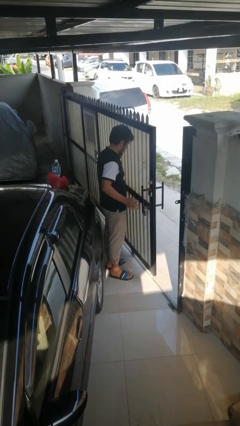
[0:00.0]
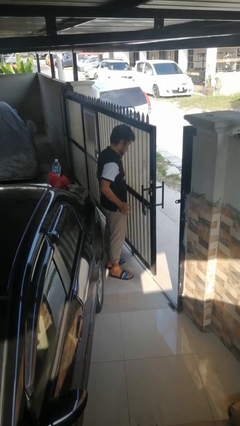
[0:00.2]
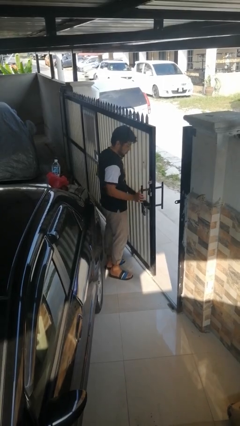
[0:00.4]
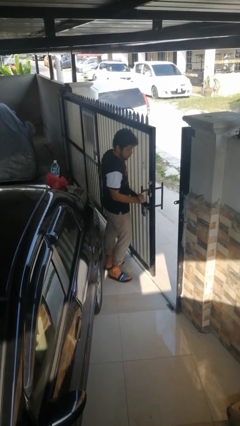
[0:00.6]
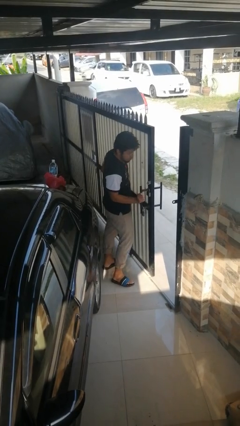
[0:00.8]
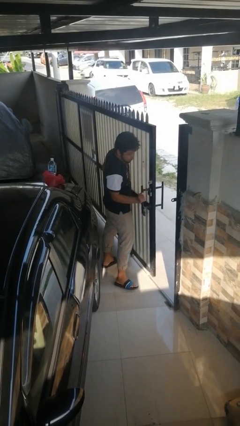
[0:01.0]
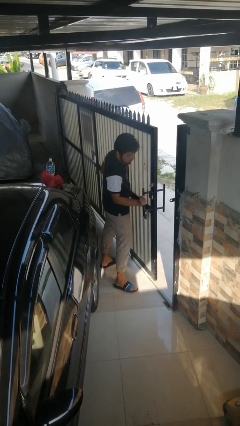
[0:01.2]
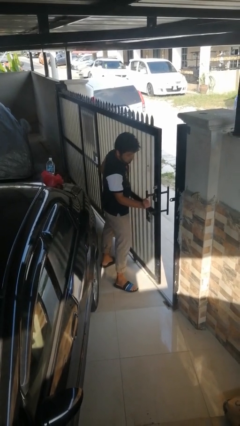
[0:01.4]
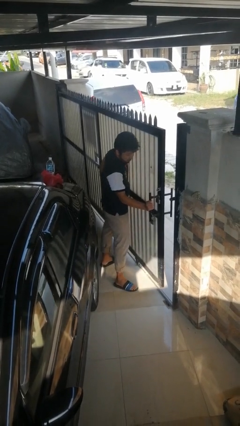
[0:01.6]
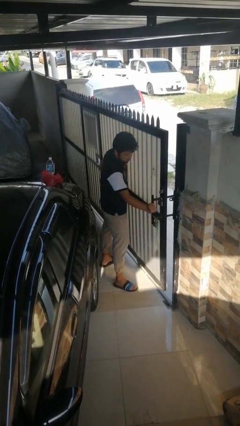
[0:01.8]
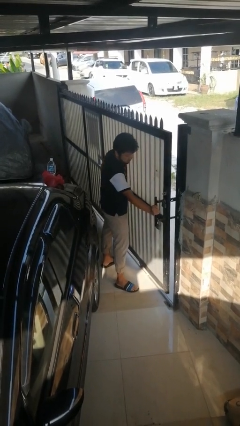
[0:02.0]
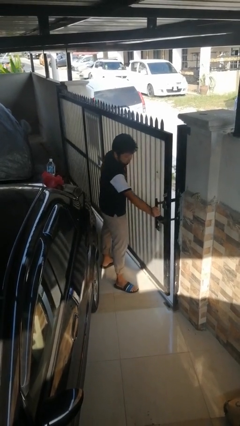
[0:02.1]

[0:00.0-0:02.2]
person closes sliding door

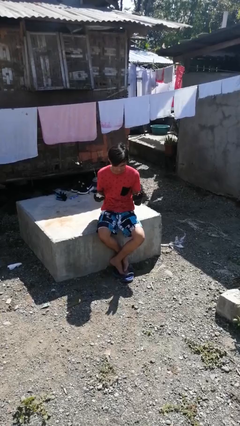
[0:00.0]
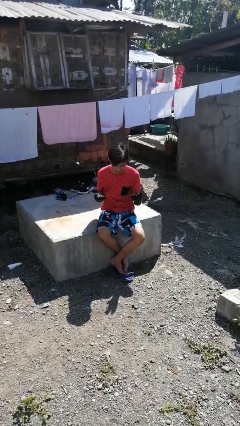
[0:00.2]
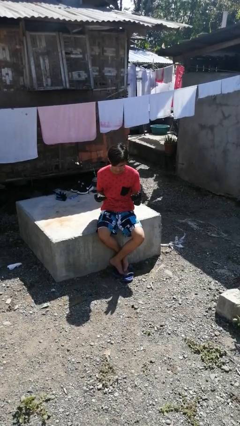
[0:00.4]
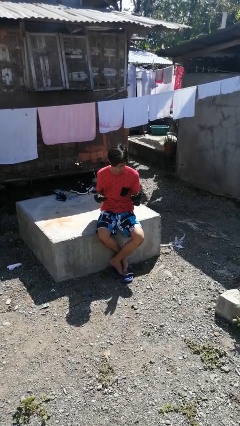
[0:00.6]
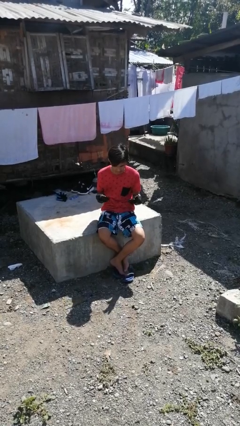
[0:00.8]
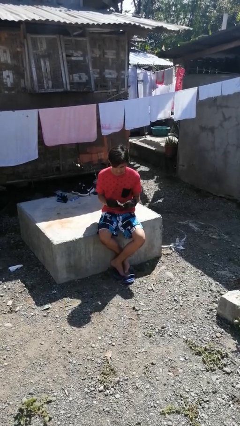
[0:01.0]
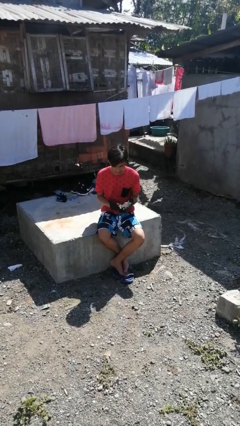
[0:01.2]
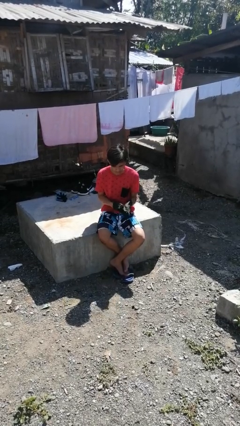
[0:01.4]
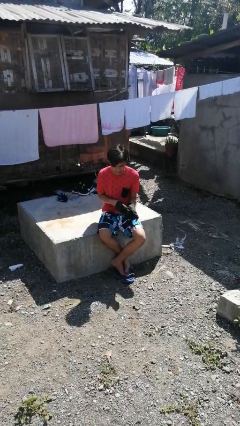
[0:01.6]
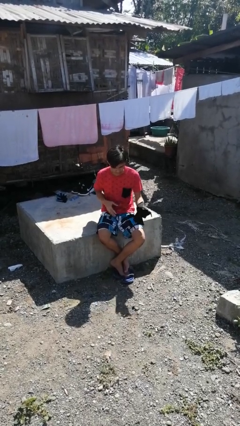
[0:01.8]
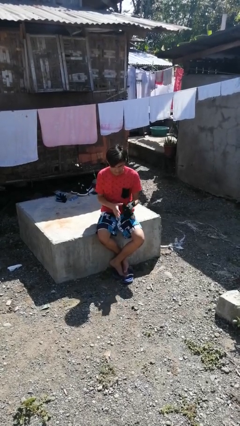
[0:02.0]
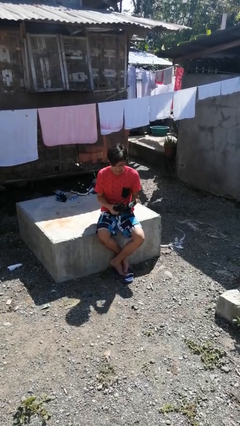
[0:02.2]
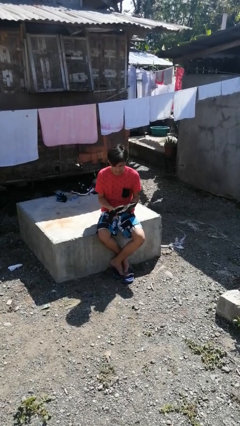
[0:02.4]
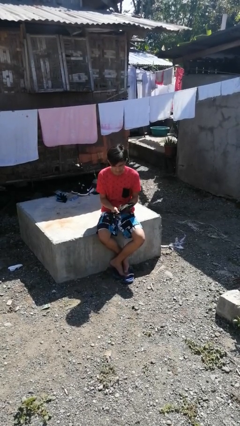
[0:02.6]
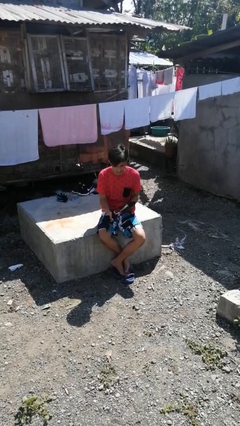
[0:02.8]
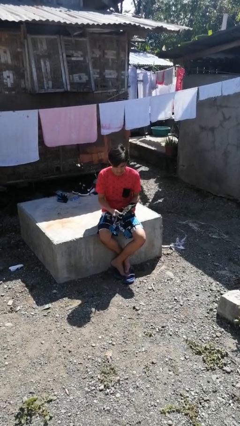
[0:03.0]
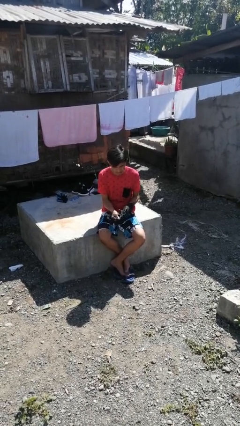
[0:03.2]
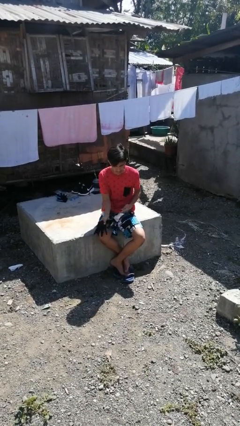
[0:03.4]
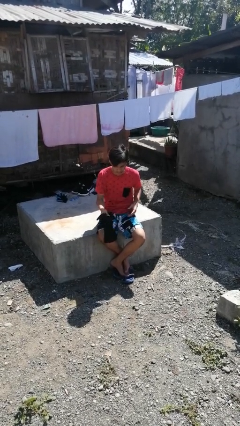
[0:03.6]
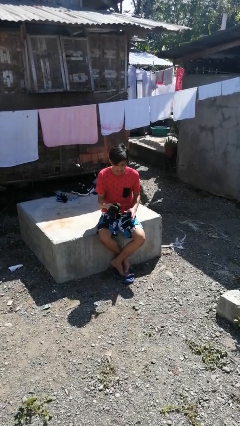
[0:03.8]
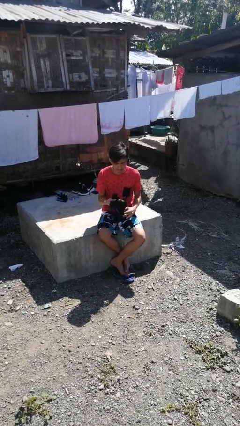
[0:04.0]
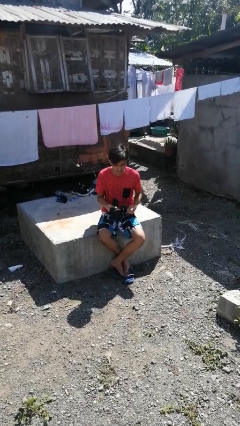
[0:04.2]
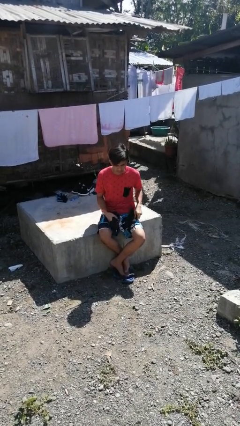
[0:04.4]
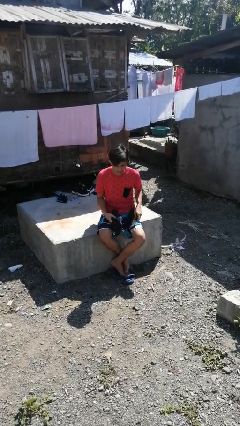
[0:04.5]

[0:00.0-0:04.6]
person takes off gloves

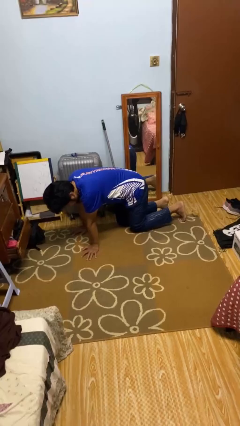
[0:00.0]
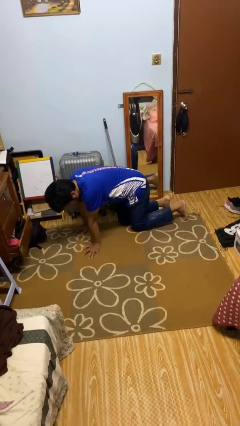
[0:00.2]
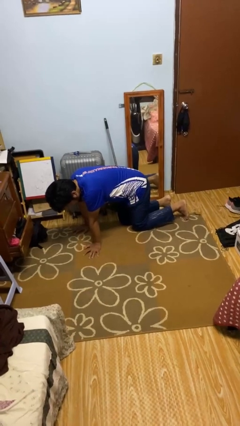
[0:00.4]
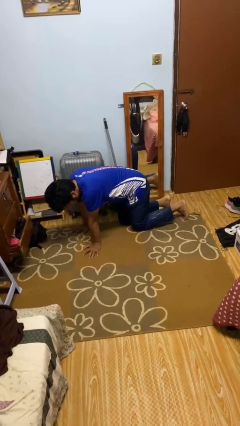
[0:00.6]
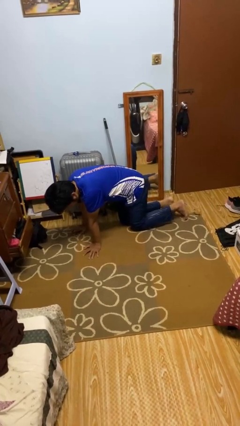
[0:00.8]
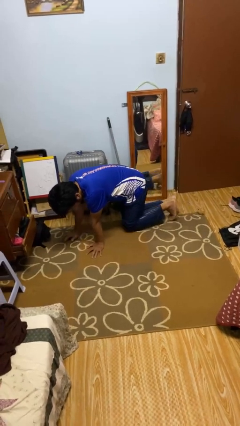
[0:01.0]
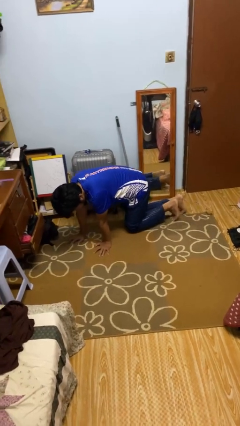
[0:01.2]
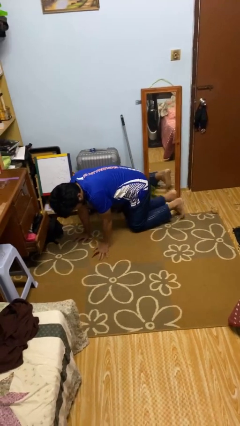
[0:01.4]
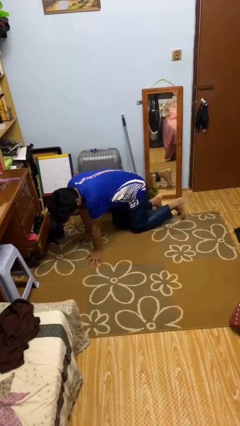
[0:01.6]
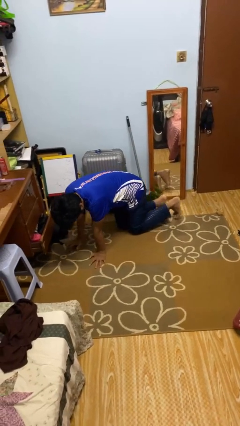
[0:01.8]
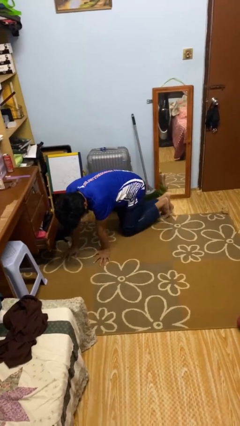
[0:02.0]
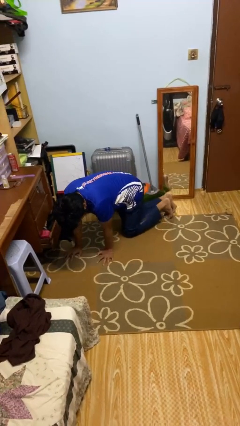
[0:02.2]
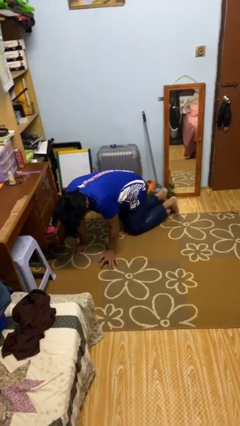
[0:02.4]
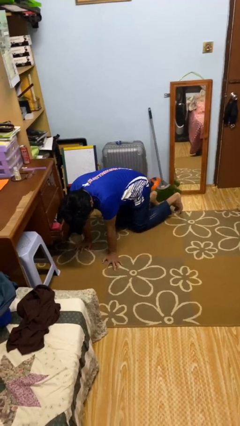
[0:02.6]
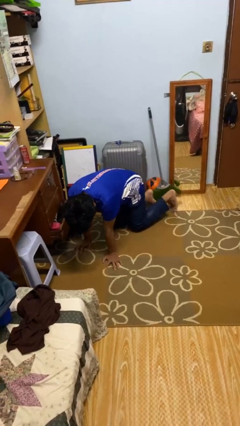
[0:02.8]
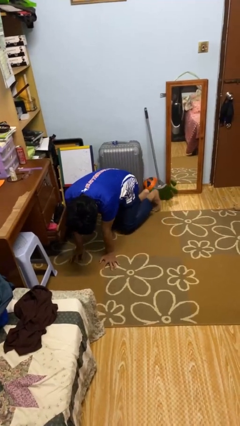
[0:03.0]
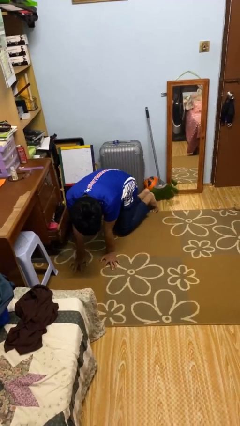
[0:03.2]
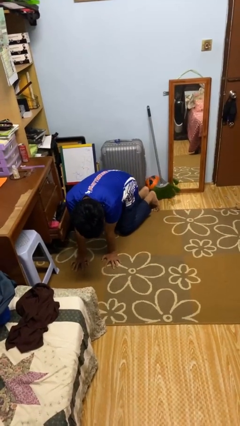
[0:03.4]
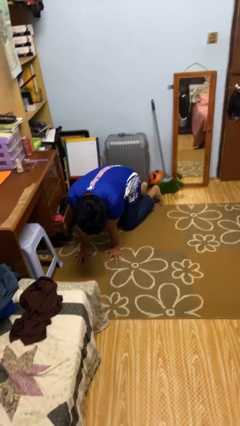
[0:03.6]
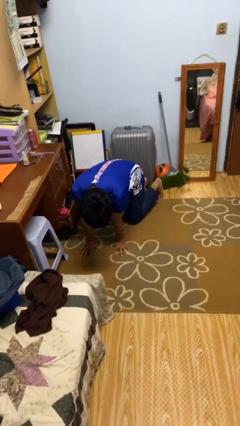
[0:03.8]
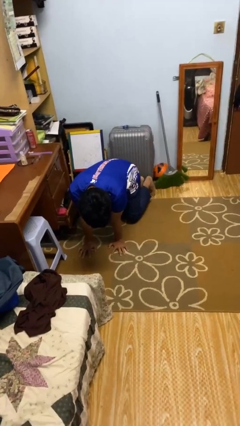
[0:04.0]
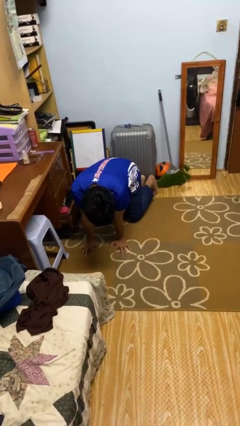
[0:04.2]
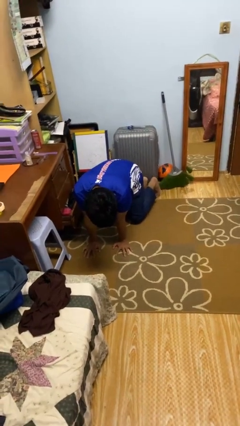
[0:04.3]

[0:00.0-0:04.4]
person crawls

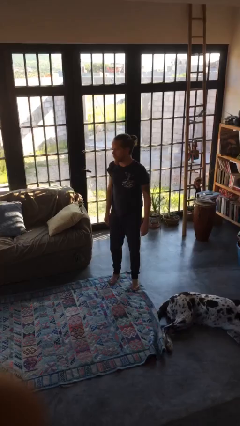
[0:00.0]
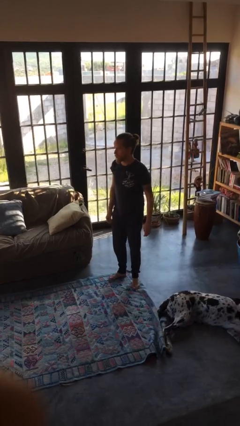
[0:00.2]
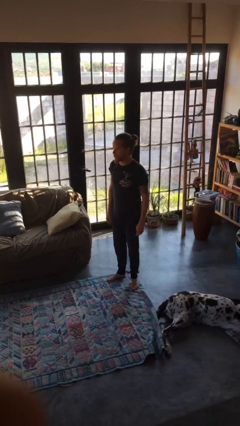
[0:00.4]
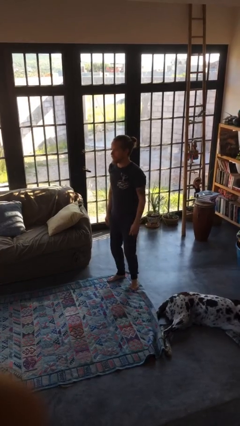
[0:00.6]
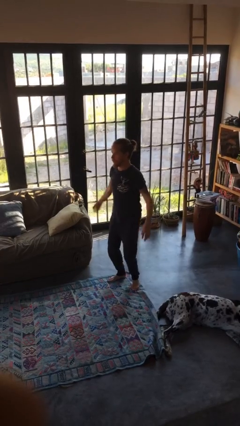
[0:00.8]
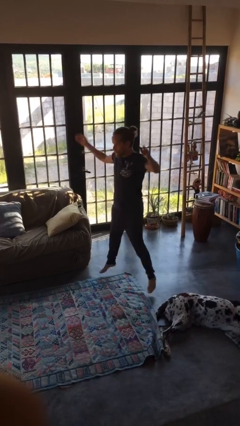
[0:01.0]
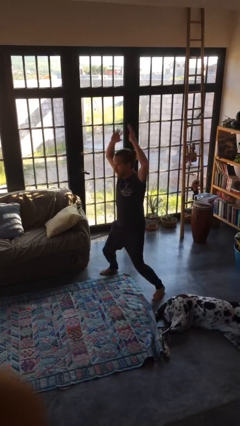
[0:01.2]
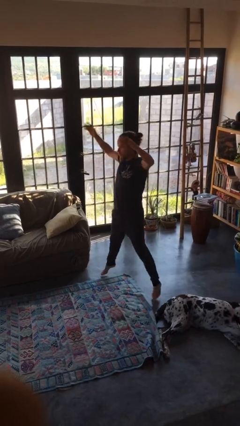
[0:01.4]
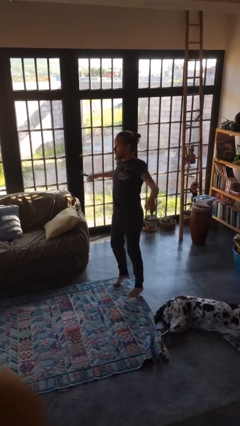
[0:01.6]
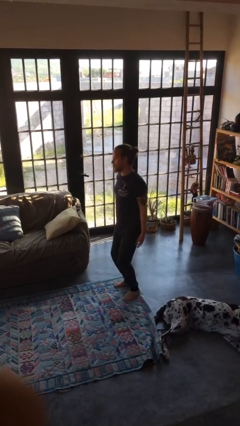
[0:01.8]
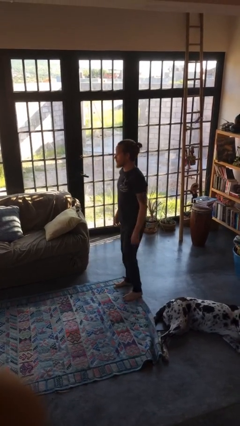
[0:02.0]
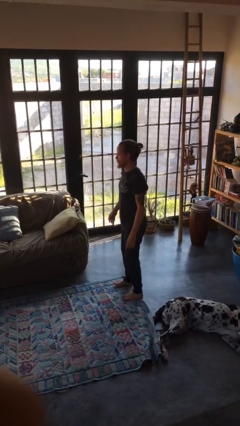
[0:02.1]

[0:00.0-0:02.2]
person exercises with jumping jacks

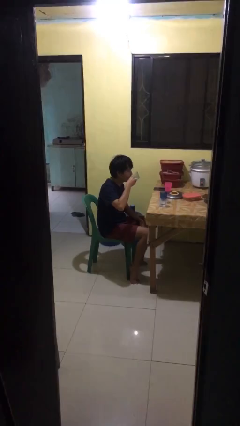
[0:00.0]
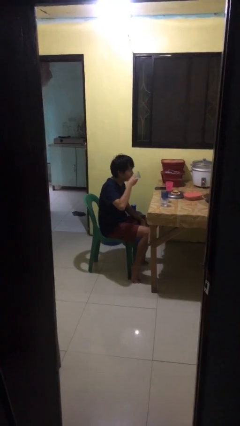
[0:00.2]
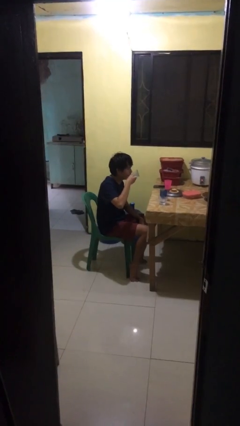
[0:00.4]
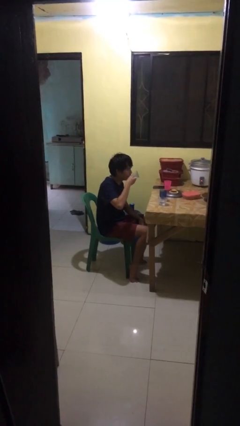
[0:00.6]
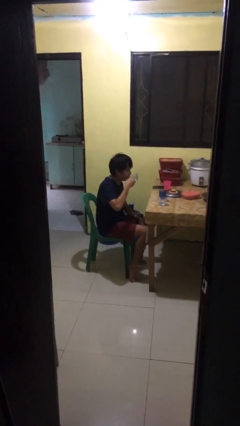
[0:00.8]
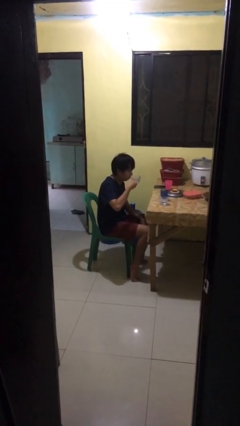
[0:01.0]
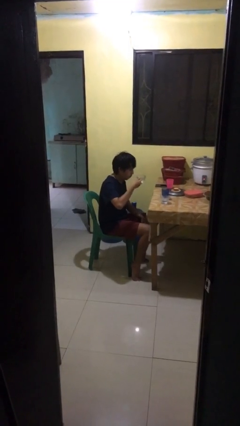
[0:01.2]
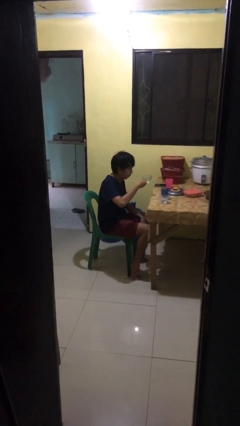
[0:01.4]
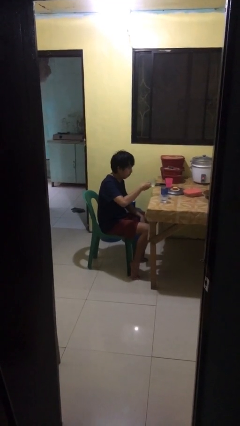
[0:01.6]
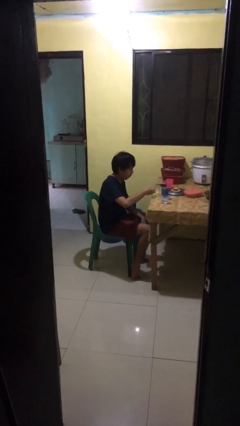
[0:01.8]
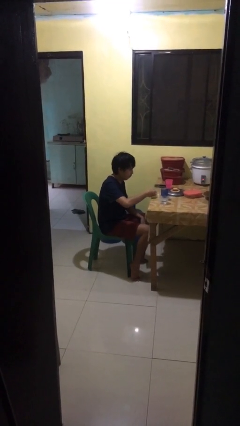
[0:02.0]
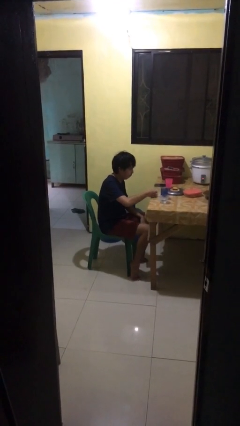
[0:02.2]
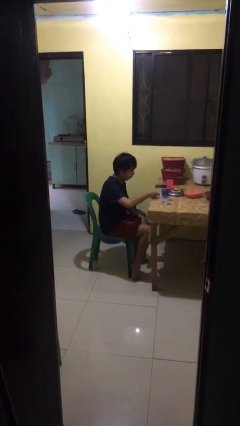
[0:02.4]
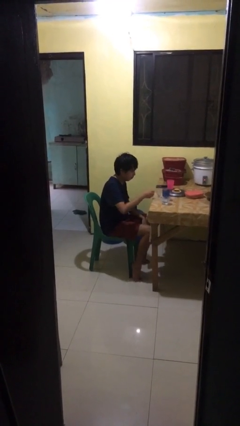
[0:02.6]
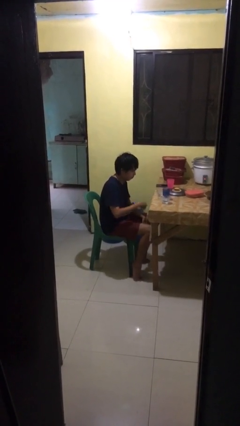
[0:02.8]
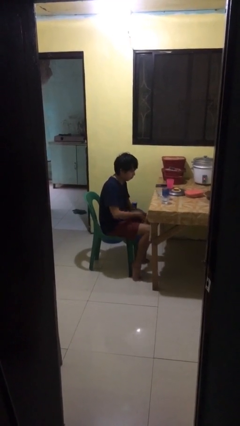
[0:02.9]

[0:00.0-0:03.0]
person puts down object on table

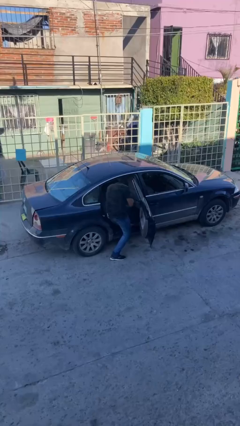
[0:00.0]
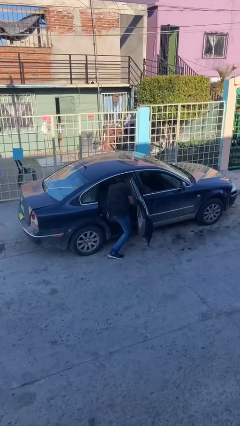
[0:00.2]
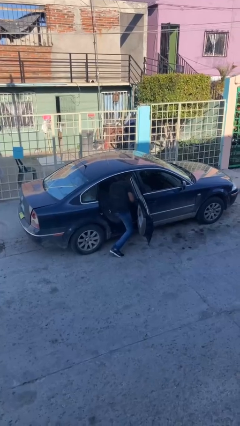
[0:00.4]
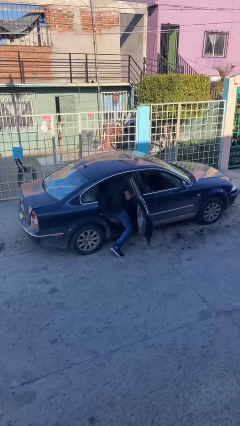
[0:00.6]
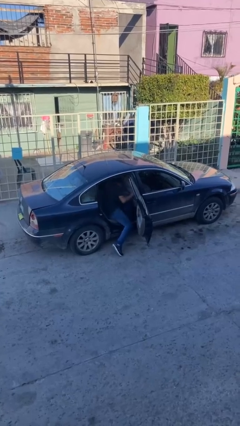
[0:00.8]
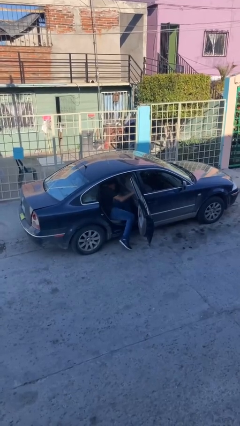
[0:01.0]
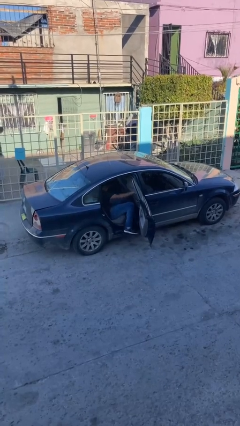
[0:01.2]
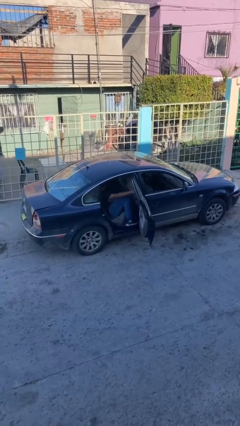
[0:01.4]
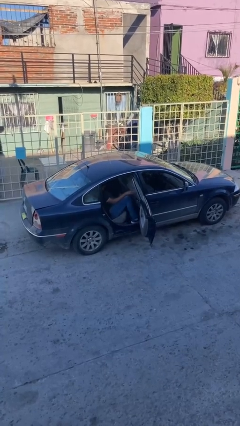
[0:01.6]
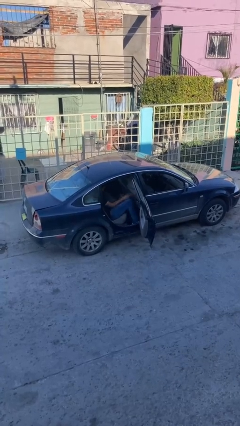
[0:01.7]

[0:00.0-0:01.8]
person enters car
